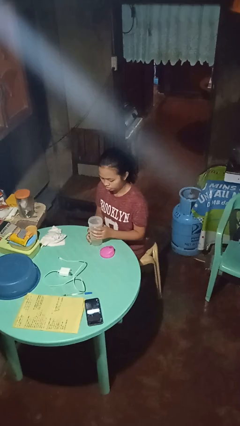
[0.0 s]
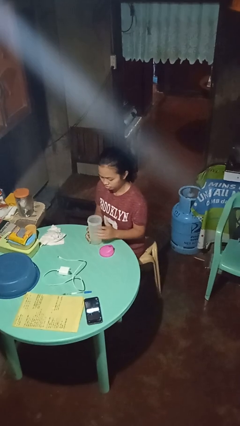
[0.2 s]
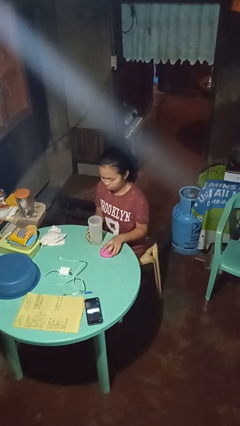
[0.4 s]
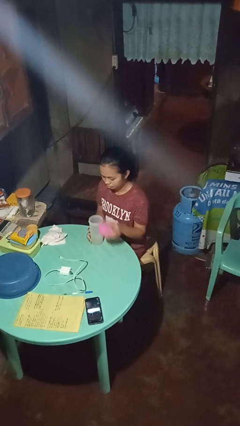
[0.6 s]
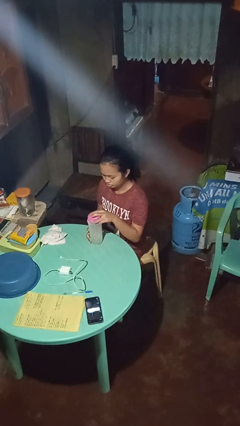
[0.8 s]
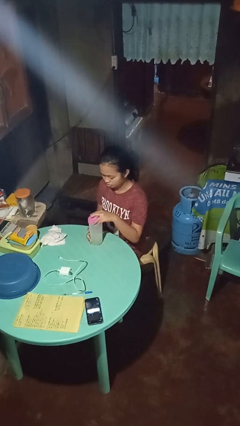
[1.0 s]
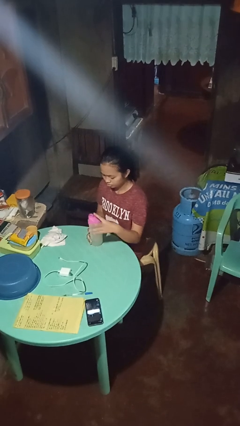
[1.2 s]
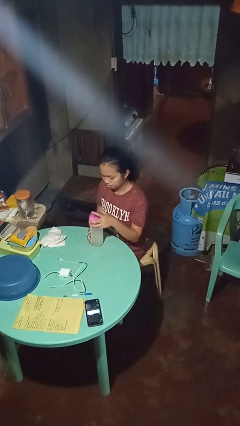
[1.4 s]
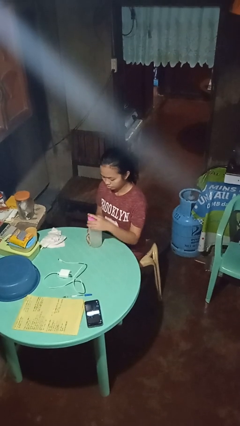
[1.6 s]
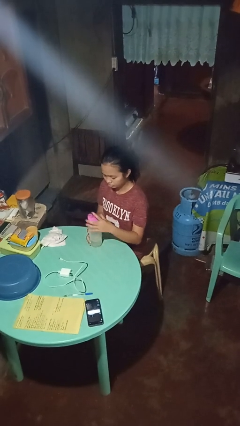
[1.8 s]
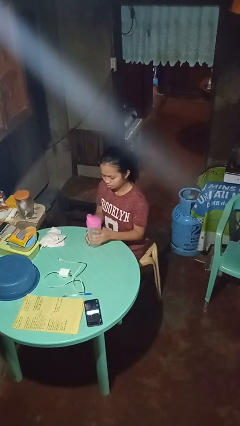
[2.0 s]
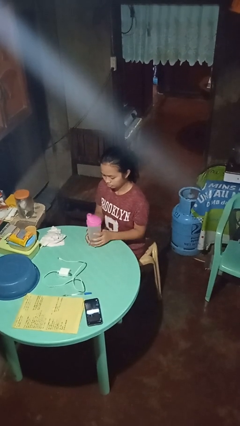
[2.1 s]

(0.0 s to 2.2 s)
person screws lid to bottle

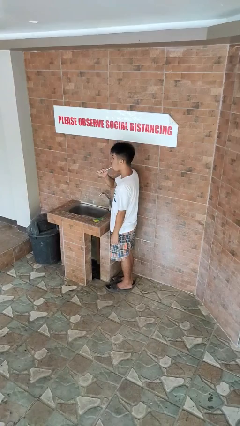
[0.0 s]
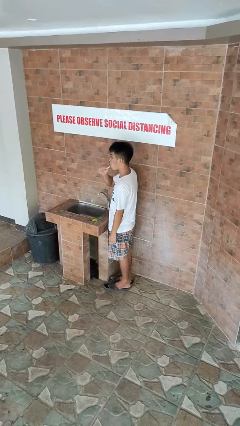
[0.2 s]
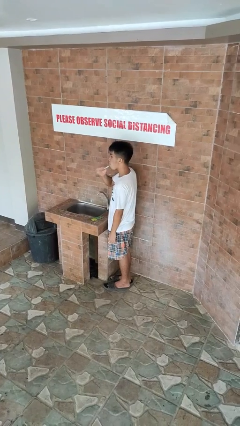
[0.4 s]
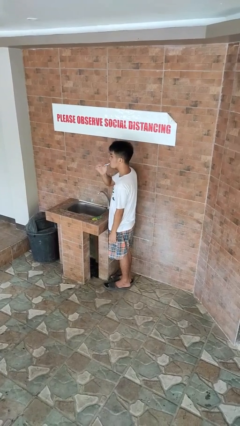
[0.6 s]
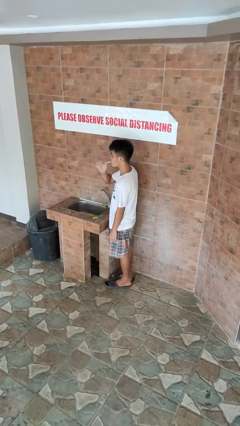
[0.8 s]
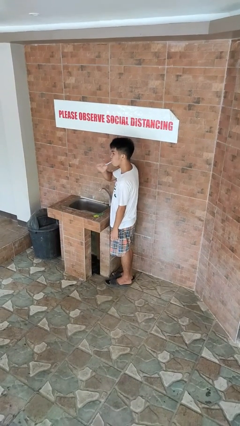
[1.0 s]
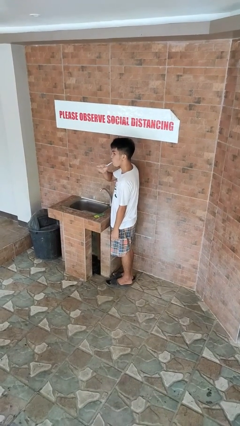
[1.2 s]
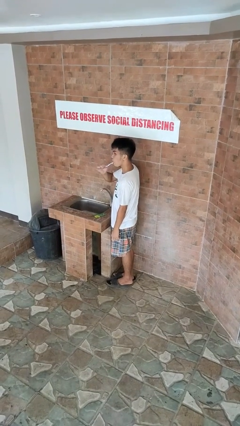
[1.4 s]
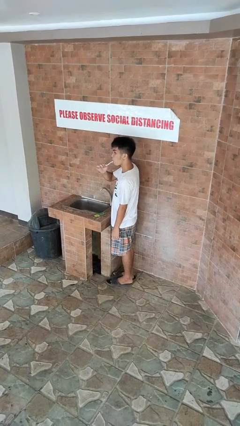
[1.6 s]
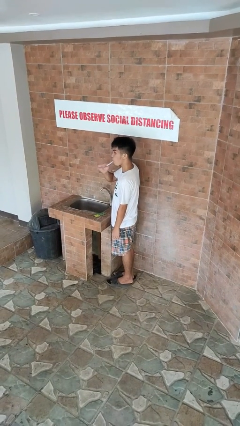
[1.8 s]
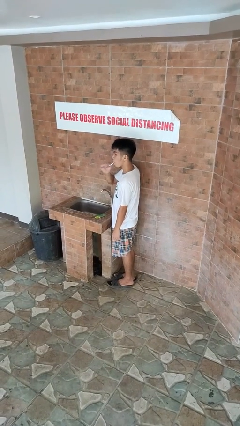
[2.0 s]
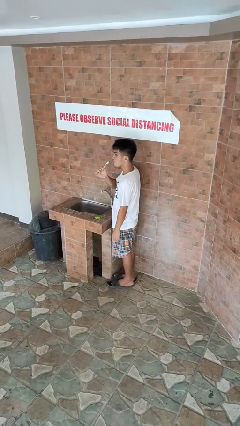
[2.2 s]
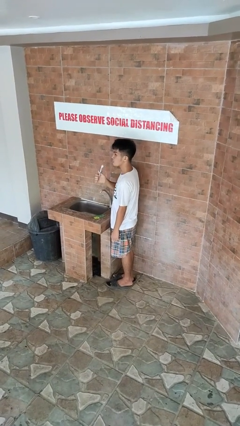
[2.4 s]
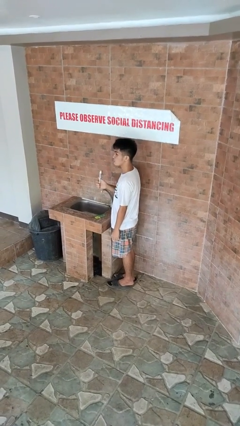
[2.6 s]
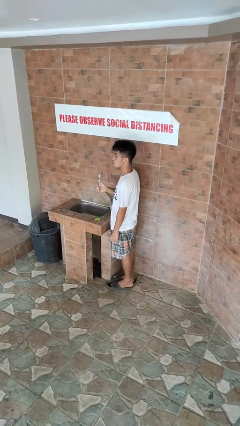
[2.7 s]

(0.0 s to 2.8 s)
person brushes teeth

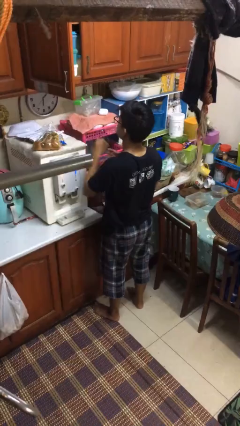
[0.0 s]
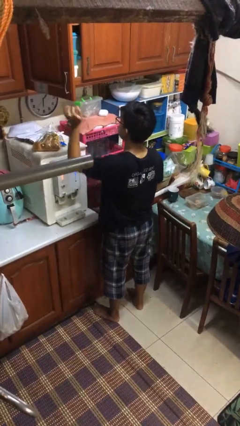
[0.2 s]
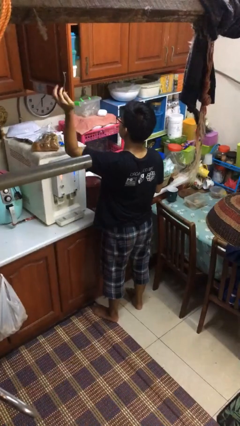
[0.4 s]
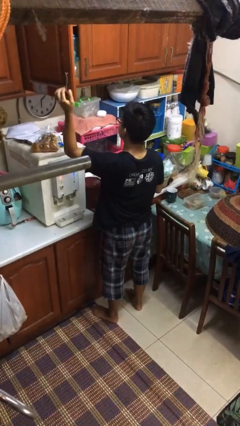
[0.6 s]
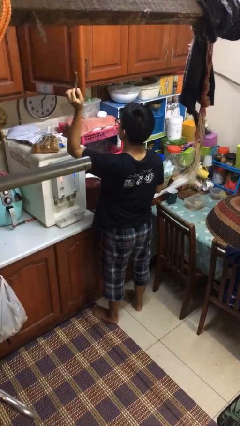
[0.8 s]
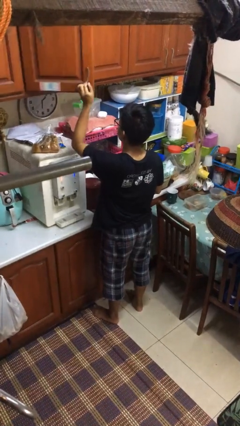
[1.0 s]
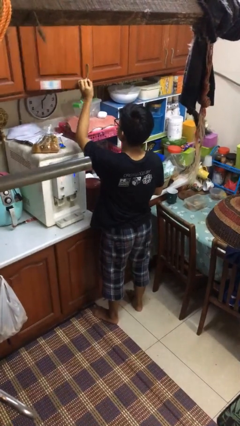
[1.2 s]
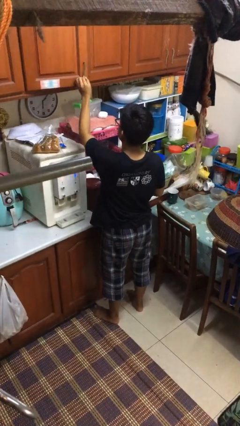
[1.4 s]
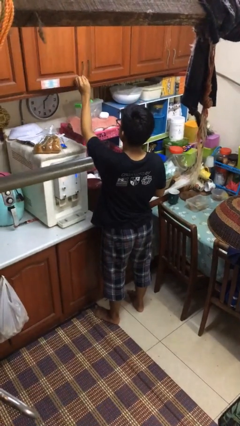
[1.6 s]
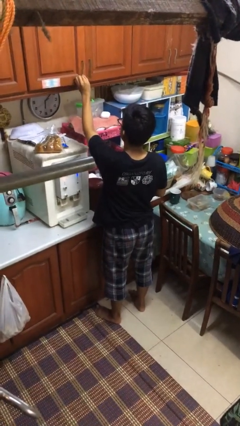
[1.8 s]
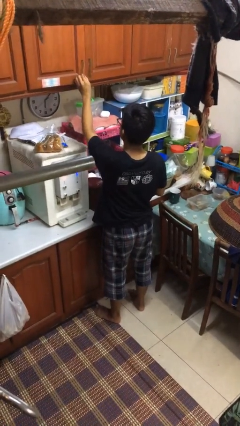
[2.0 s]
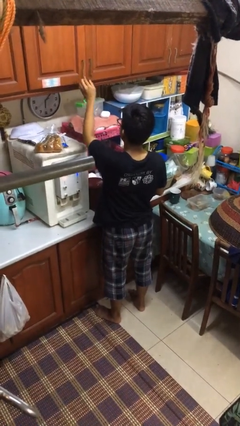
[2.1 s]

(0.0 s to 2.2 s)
person closes kitchen drawer

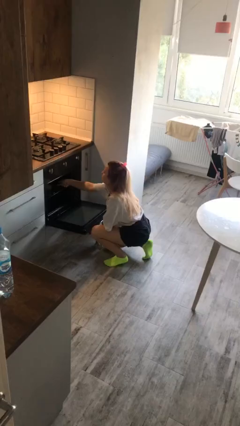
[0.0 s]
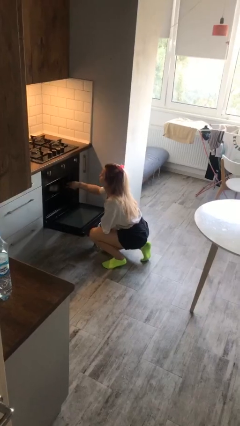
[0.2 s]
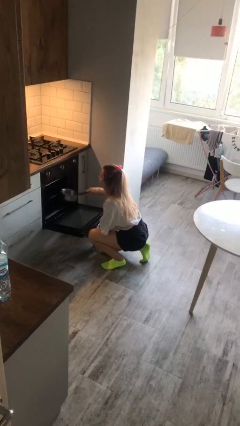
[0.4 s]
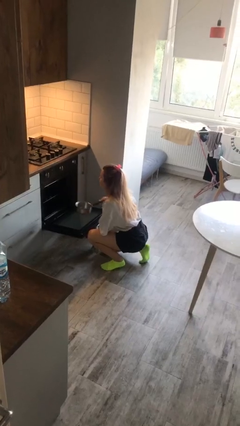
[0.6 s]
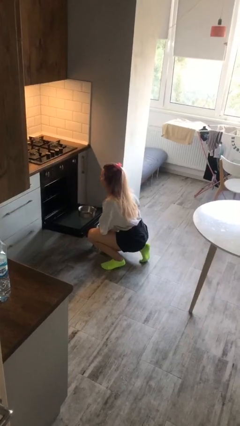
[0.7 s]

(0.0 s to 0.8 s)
person takes object from oven

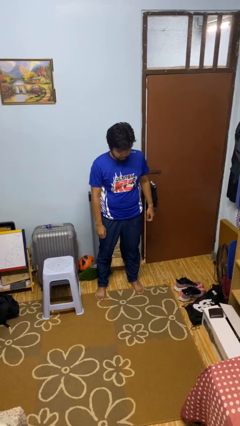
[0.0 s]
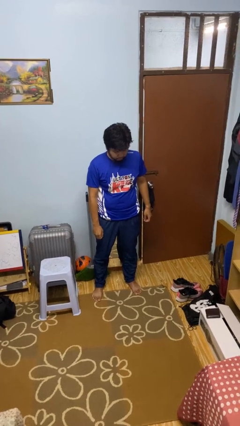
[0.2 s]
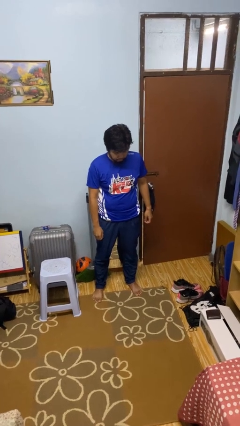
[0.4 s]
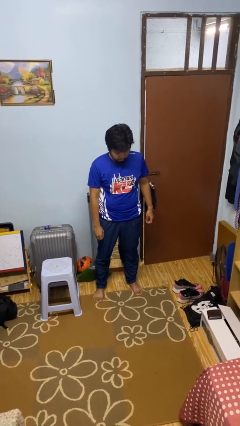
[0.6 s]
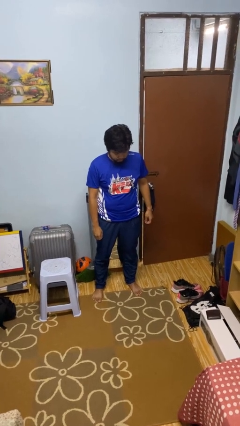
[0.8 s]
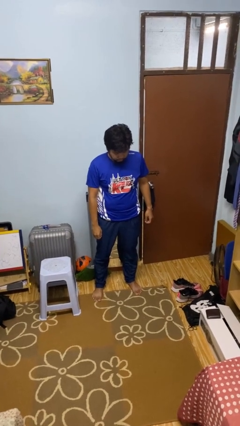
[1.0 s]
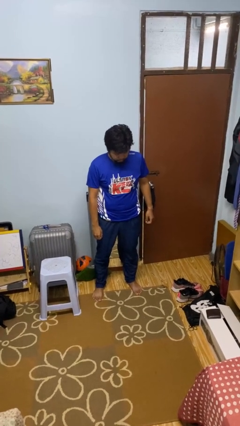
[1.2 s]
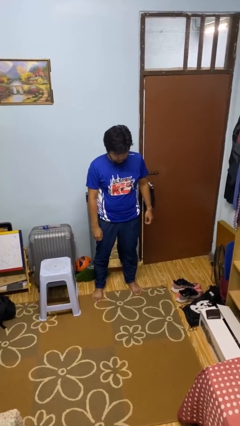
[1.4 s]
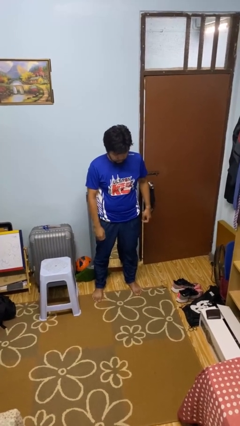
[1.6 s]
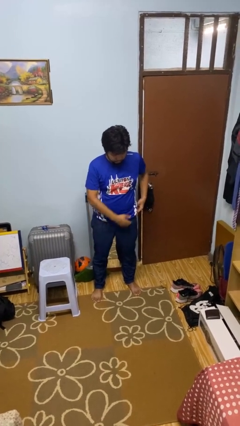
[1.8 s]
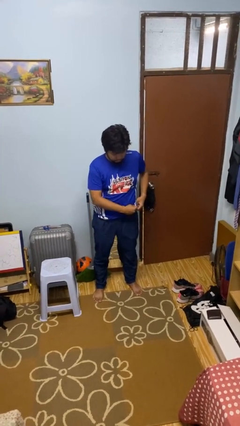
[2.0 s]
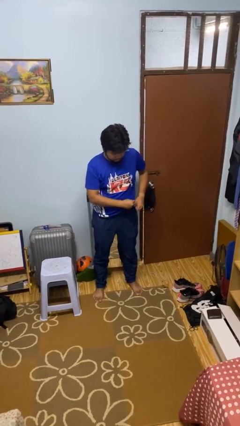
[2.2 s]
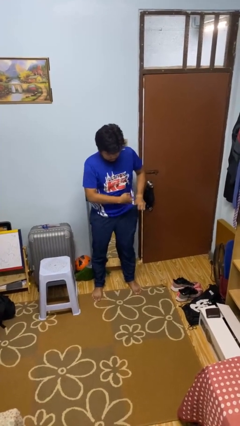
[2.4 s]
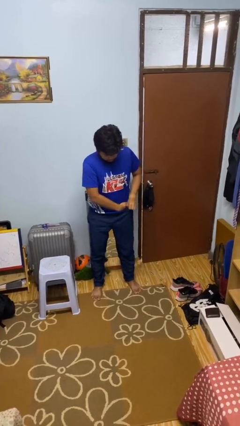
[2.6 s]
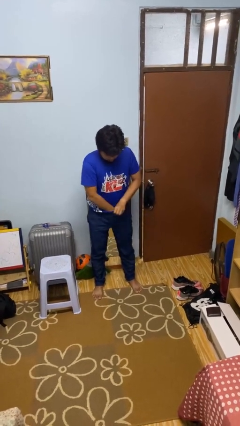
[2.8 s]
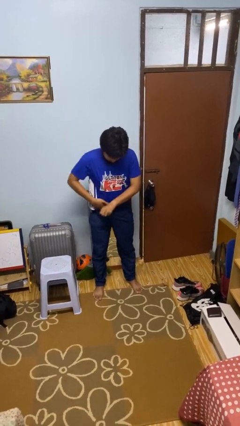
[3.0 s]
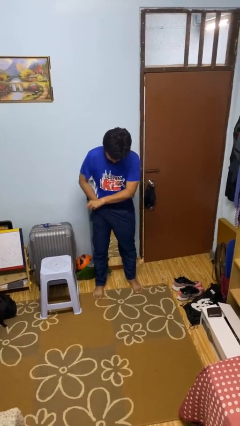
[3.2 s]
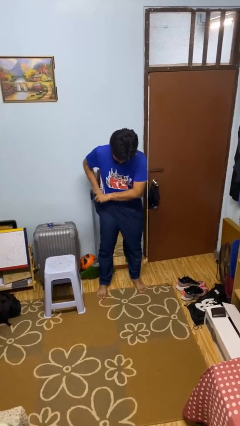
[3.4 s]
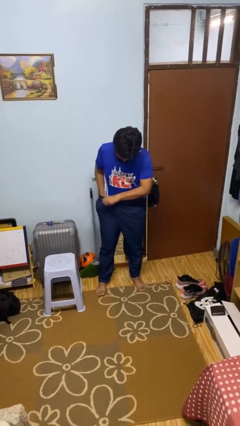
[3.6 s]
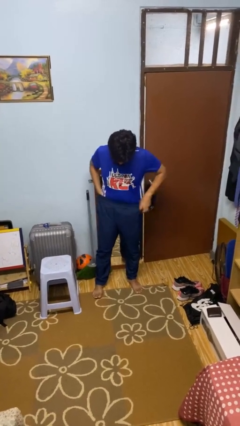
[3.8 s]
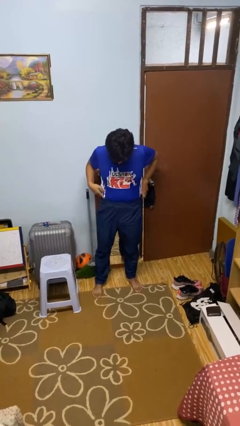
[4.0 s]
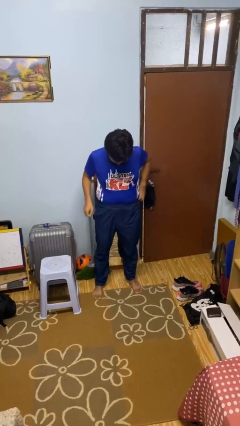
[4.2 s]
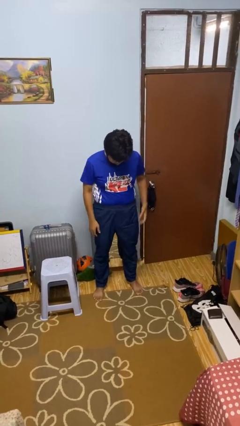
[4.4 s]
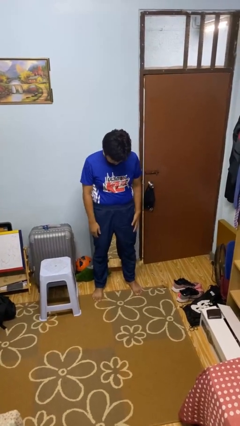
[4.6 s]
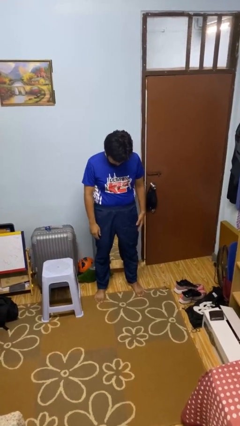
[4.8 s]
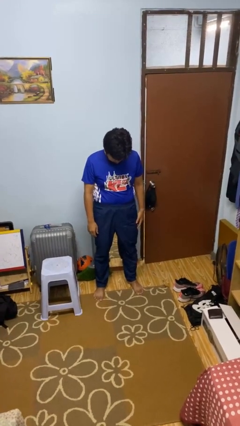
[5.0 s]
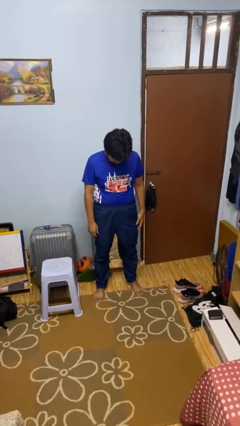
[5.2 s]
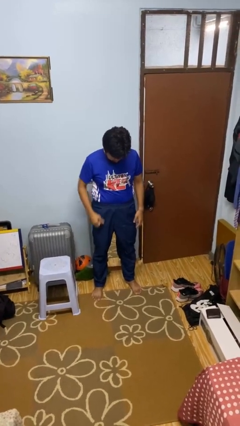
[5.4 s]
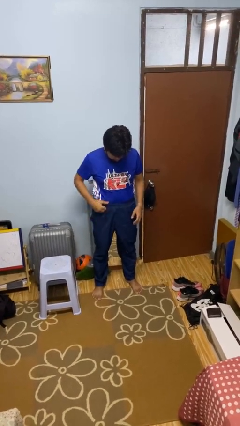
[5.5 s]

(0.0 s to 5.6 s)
person tucks in shirt

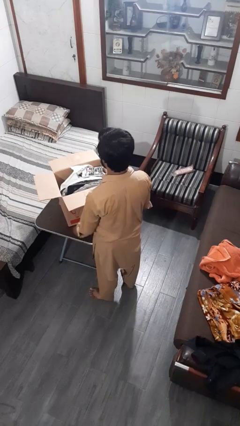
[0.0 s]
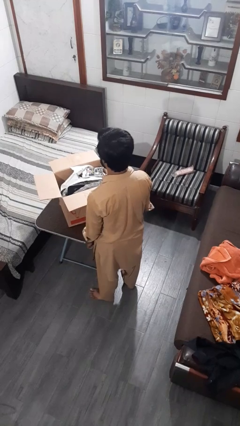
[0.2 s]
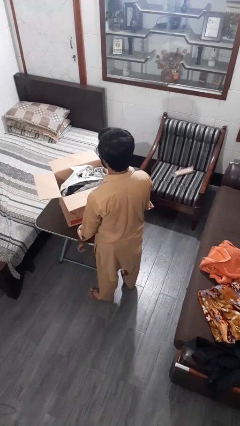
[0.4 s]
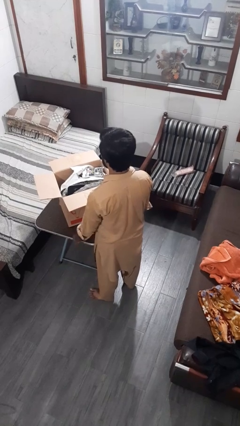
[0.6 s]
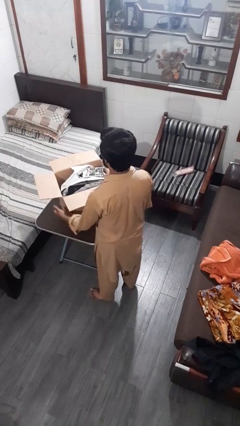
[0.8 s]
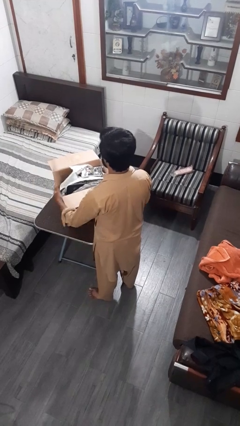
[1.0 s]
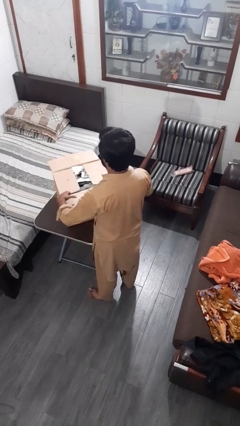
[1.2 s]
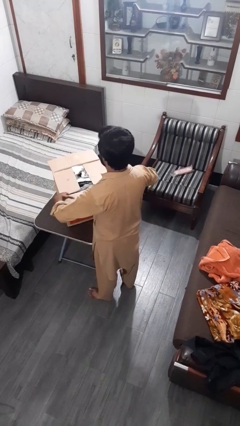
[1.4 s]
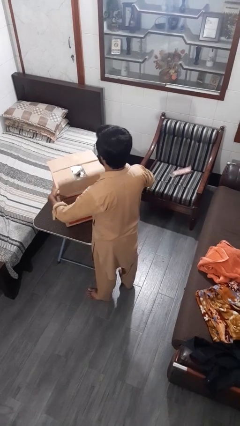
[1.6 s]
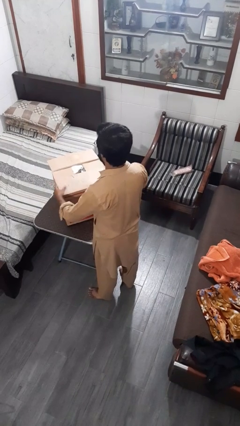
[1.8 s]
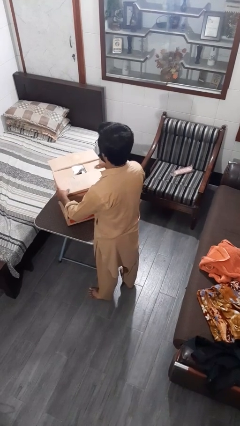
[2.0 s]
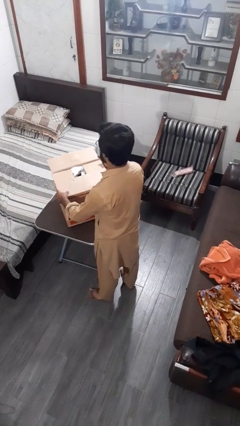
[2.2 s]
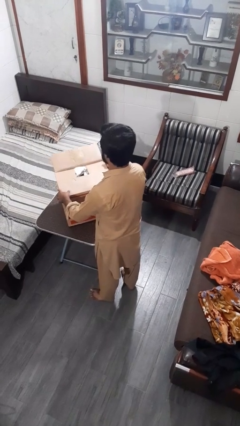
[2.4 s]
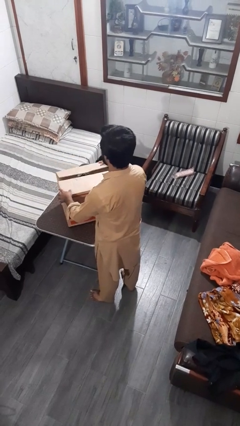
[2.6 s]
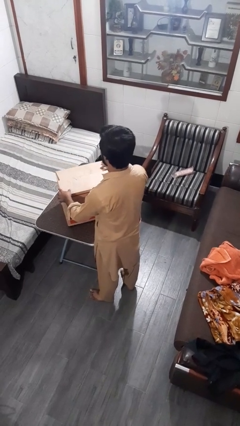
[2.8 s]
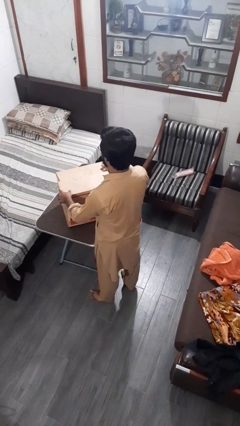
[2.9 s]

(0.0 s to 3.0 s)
person closes box

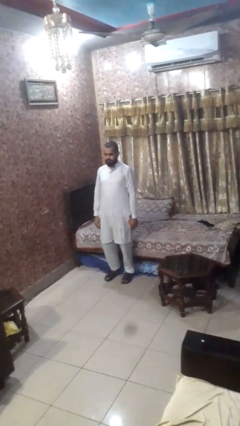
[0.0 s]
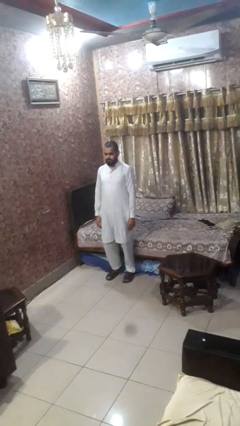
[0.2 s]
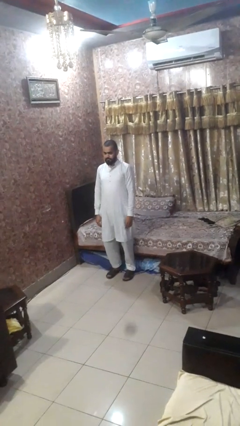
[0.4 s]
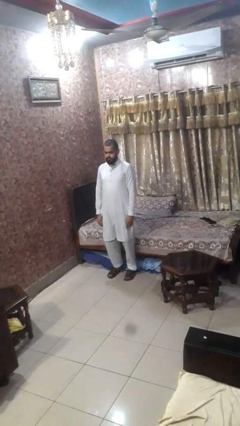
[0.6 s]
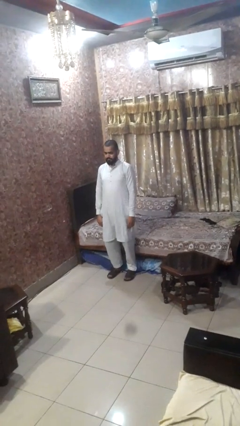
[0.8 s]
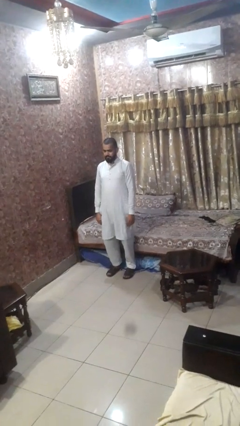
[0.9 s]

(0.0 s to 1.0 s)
person stands up
